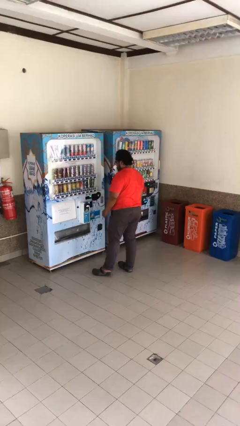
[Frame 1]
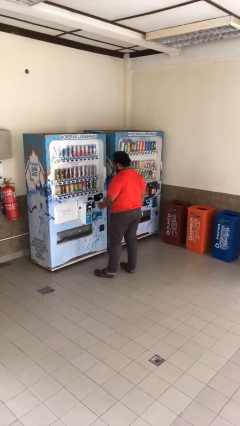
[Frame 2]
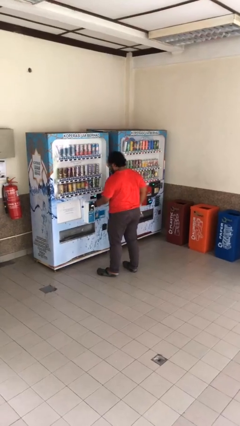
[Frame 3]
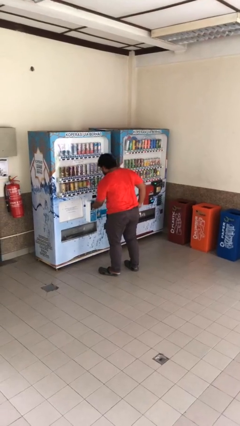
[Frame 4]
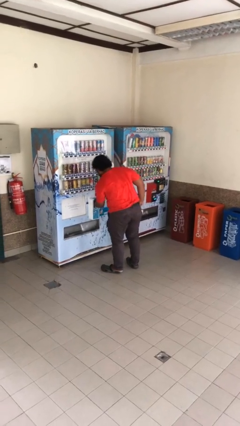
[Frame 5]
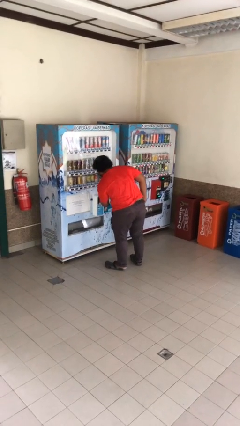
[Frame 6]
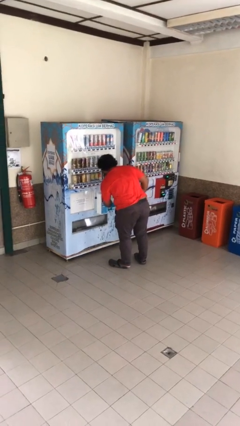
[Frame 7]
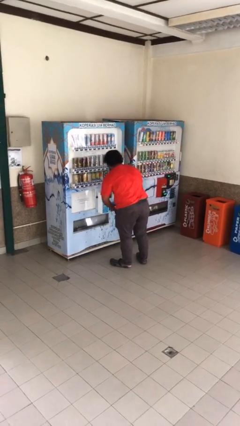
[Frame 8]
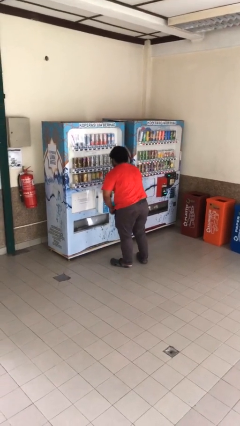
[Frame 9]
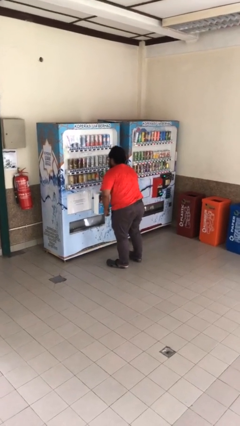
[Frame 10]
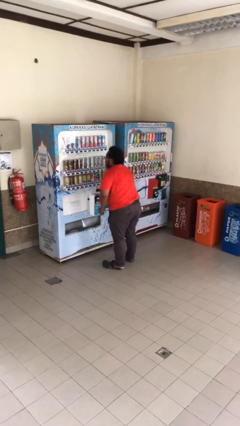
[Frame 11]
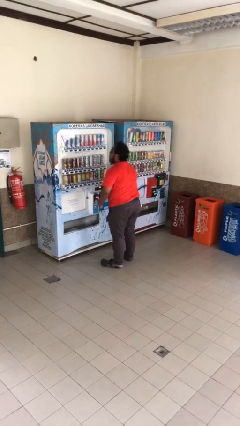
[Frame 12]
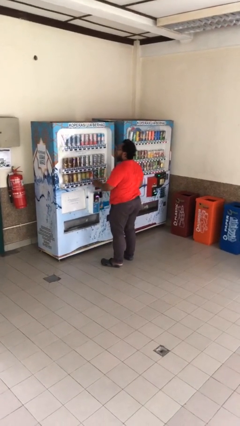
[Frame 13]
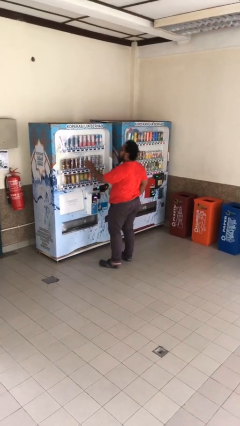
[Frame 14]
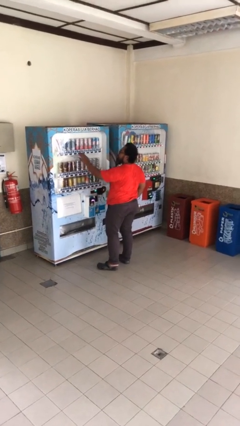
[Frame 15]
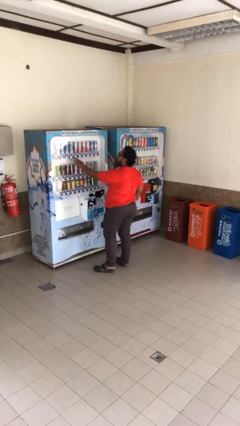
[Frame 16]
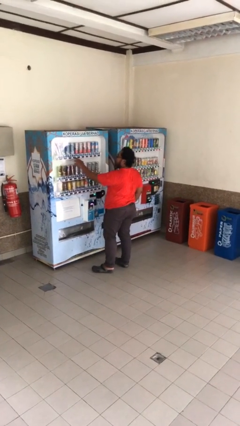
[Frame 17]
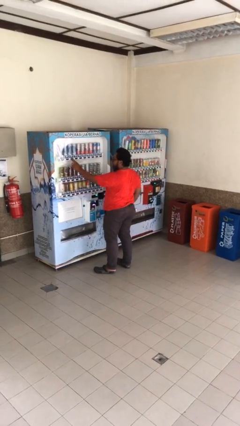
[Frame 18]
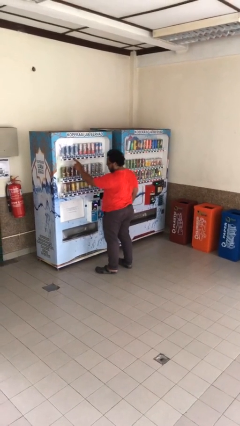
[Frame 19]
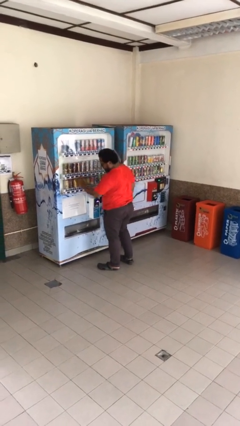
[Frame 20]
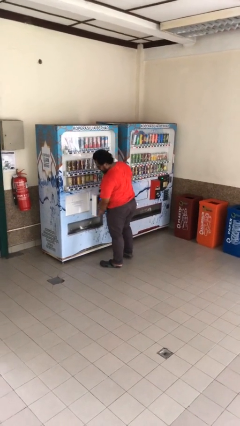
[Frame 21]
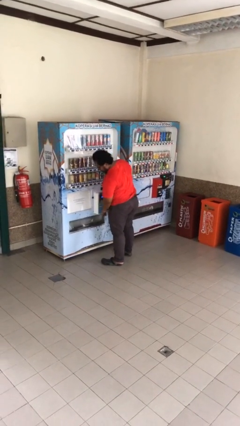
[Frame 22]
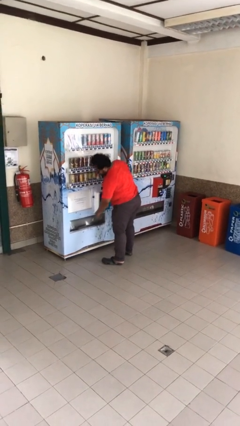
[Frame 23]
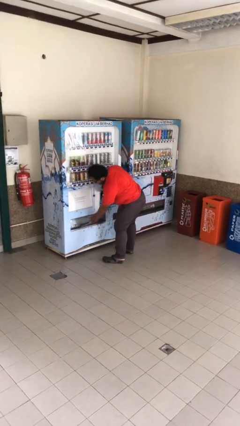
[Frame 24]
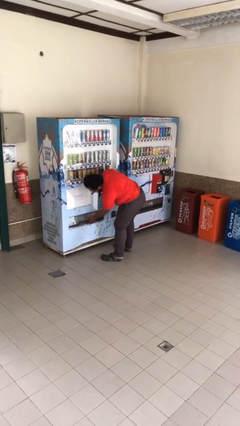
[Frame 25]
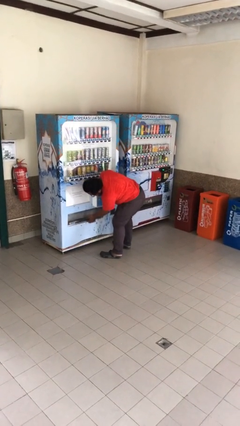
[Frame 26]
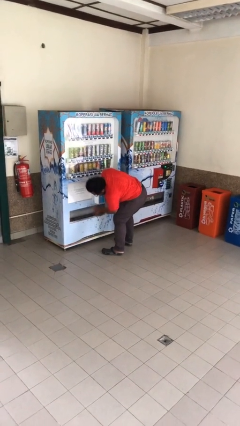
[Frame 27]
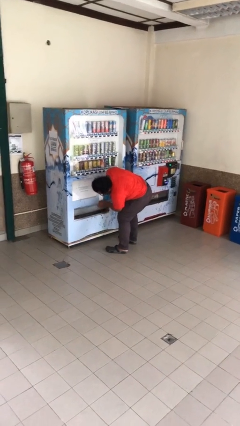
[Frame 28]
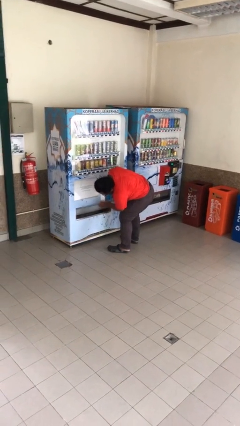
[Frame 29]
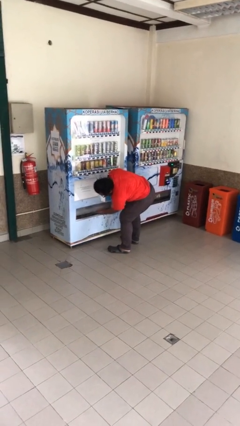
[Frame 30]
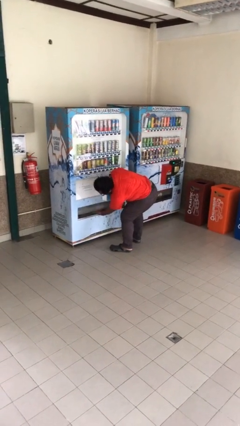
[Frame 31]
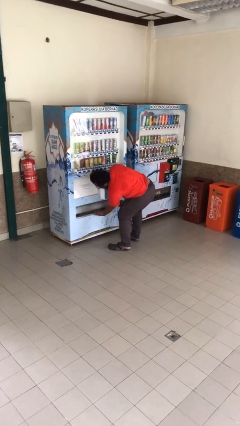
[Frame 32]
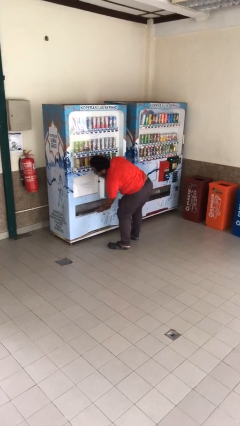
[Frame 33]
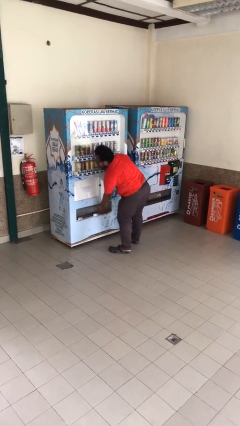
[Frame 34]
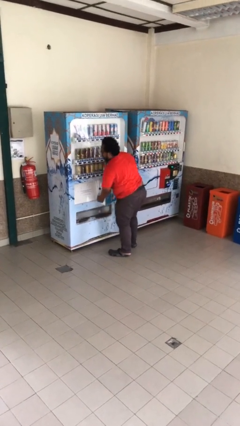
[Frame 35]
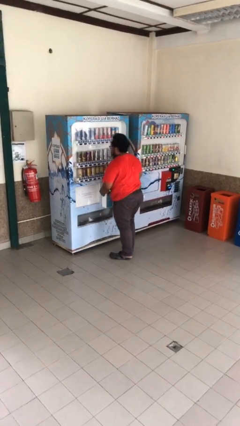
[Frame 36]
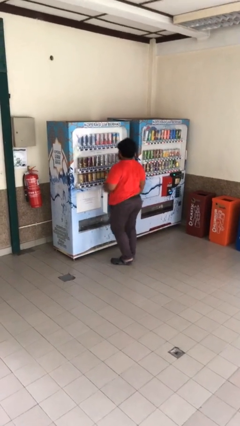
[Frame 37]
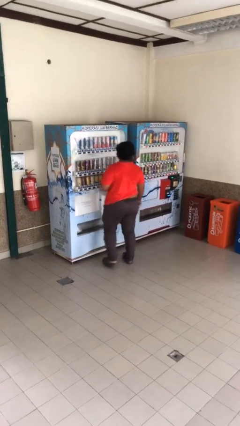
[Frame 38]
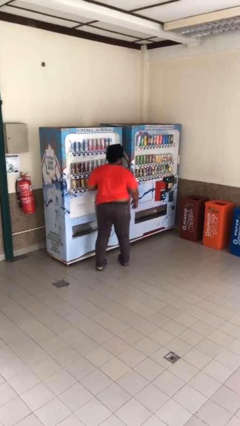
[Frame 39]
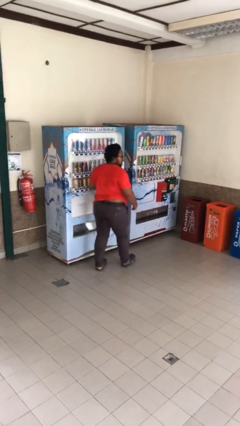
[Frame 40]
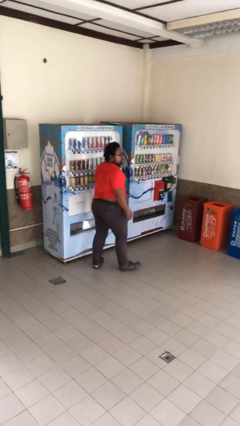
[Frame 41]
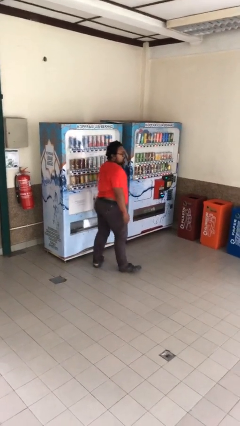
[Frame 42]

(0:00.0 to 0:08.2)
person purchases from machine

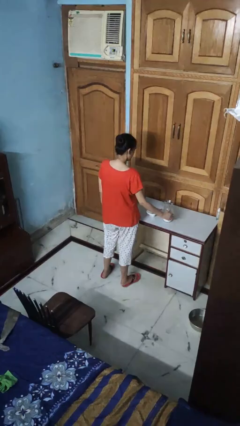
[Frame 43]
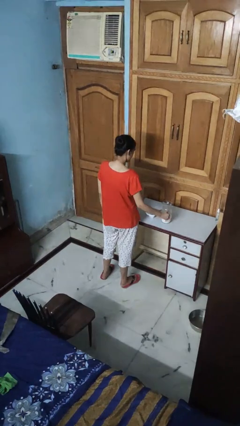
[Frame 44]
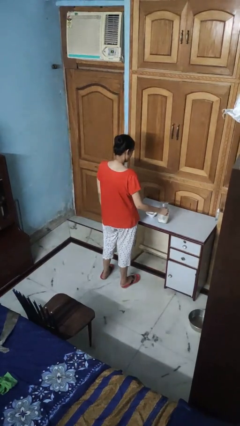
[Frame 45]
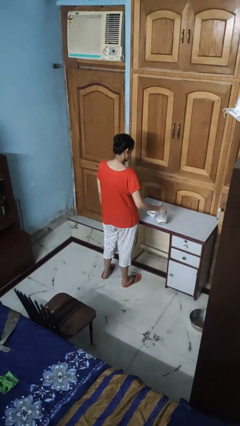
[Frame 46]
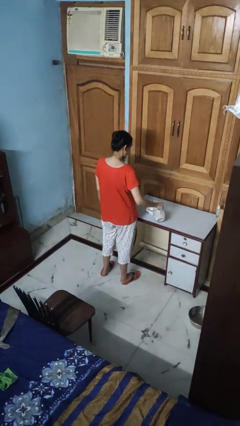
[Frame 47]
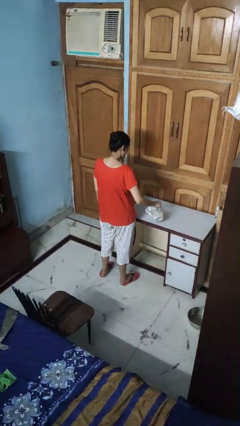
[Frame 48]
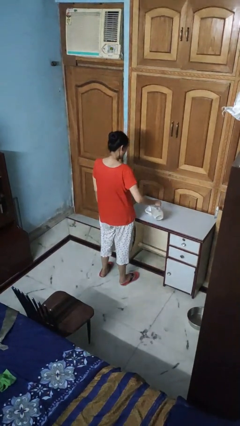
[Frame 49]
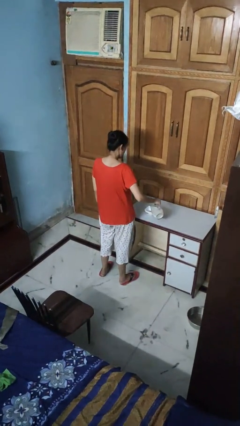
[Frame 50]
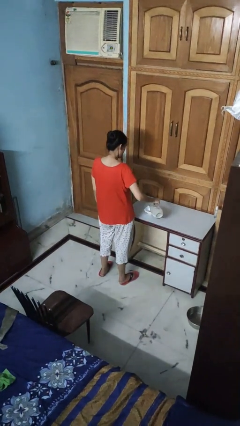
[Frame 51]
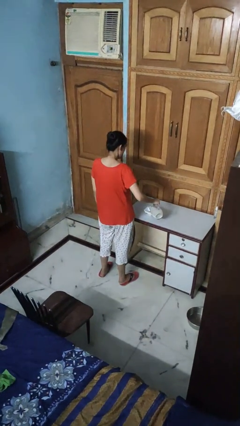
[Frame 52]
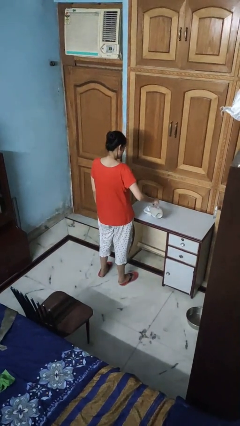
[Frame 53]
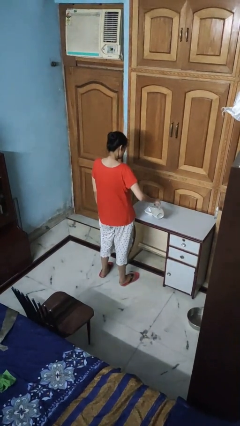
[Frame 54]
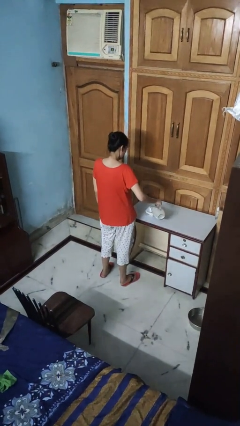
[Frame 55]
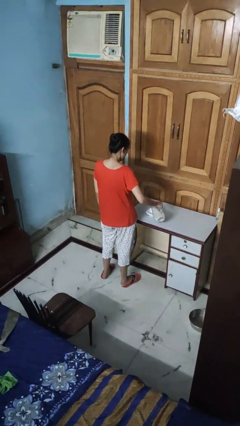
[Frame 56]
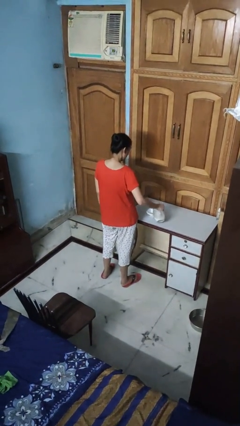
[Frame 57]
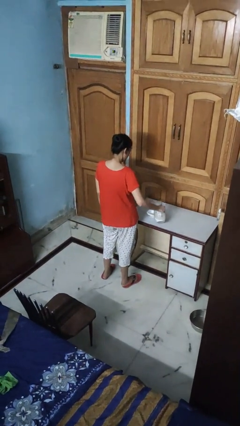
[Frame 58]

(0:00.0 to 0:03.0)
person pours into bowl

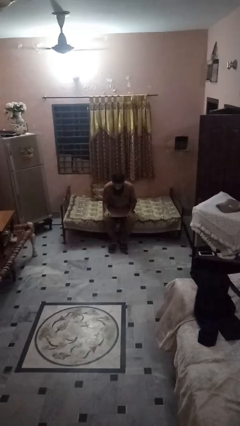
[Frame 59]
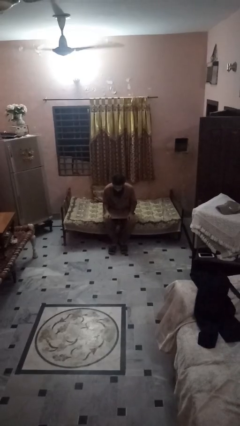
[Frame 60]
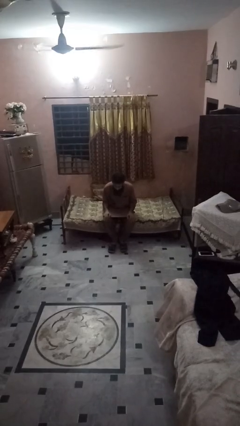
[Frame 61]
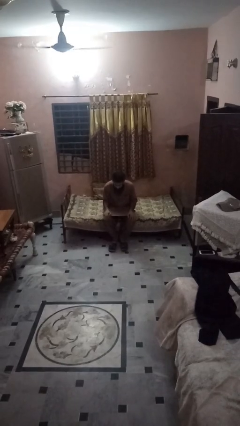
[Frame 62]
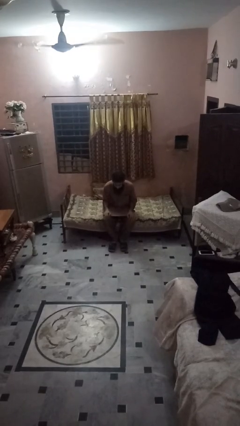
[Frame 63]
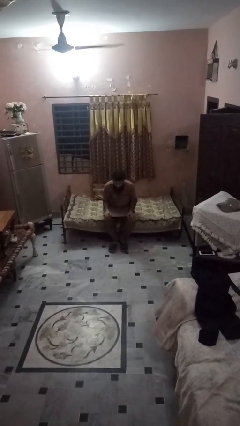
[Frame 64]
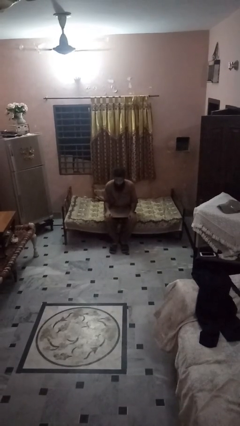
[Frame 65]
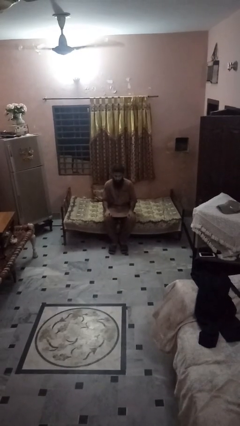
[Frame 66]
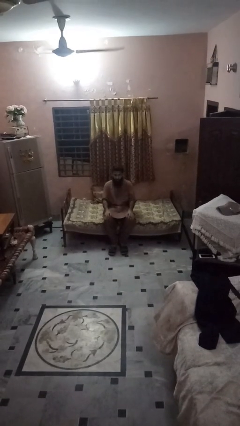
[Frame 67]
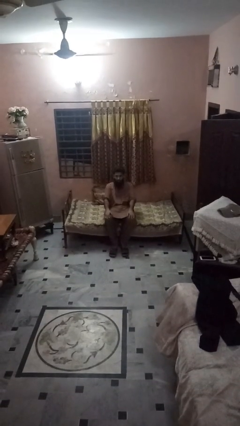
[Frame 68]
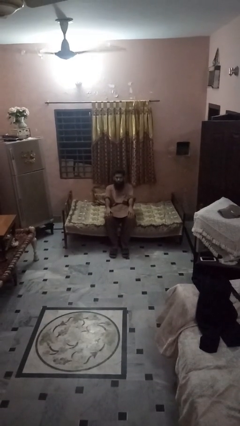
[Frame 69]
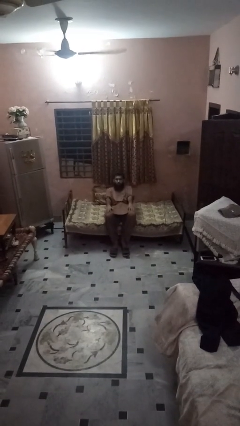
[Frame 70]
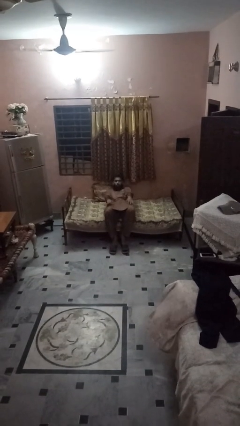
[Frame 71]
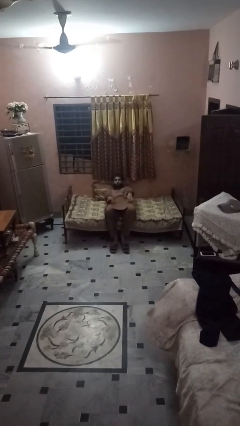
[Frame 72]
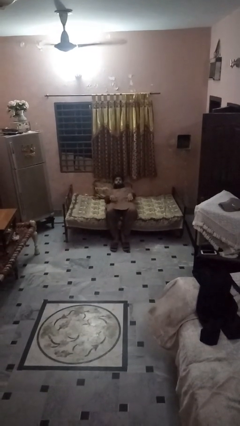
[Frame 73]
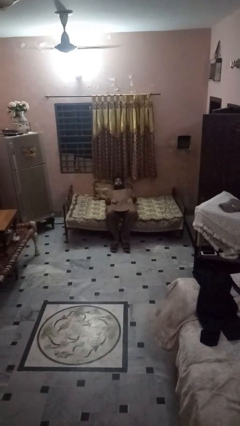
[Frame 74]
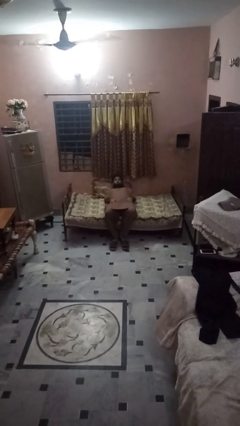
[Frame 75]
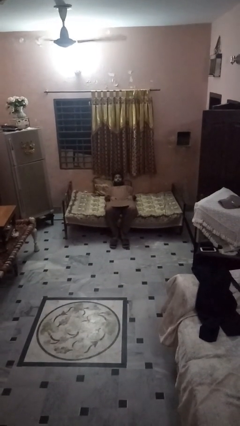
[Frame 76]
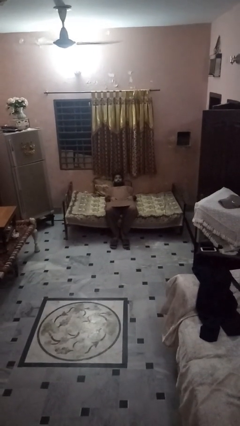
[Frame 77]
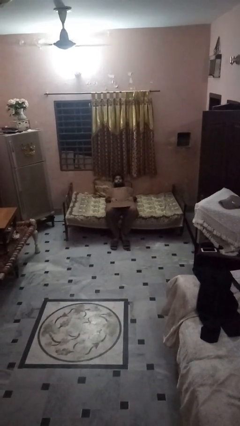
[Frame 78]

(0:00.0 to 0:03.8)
person lies down on bed

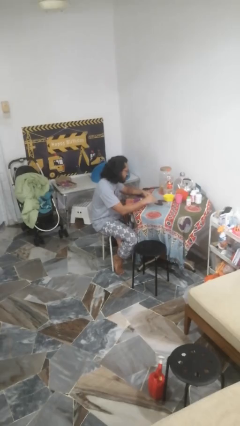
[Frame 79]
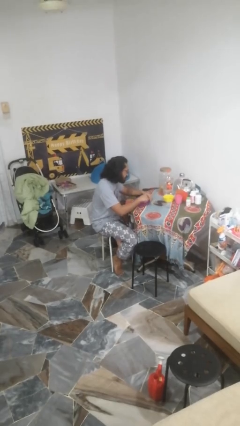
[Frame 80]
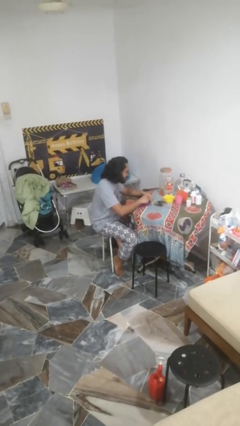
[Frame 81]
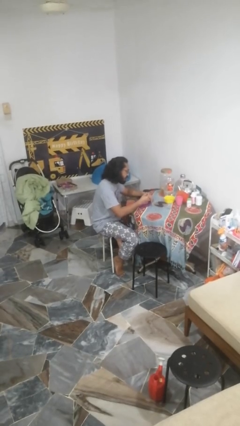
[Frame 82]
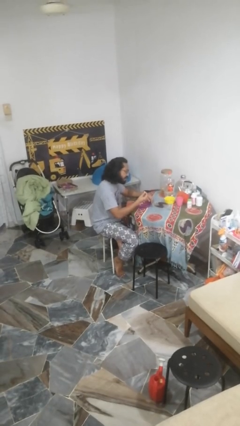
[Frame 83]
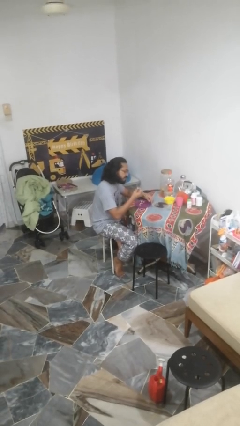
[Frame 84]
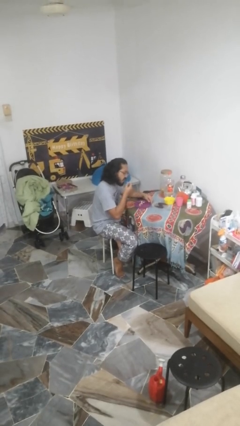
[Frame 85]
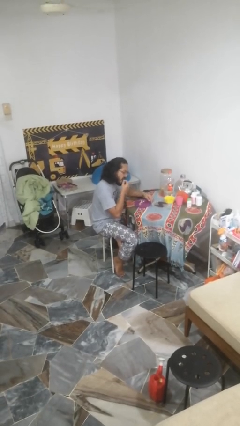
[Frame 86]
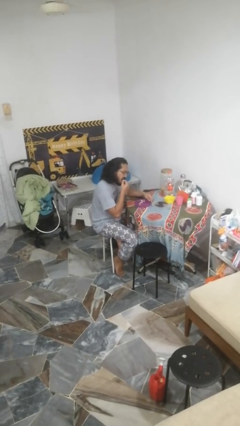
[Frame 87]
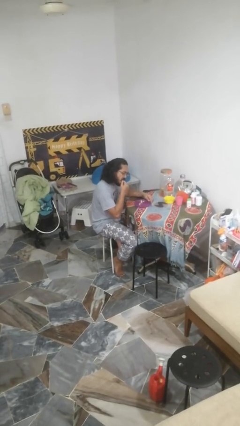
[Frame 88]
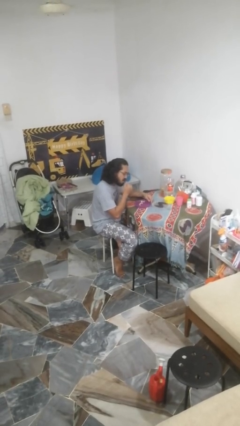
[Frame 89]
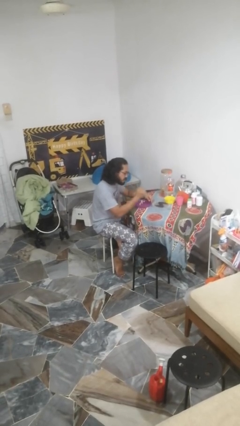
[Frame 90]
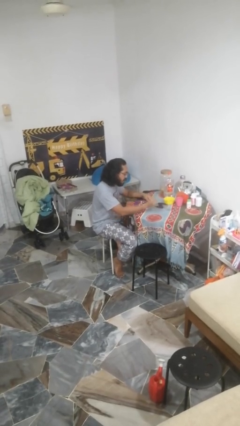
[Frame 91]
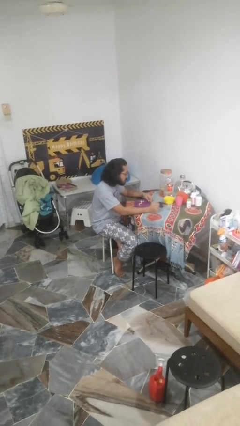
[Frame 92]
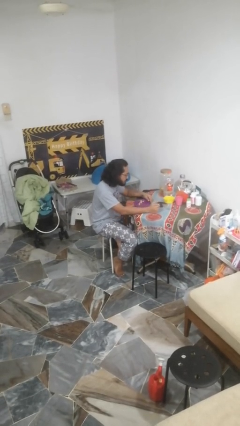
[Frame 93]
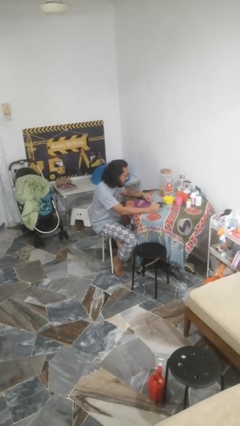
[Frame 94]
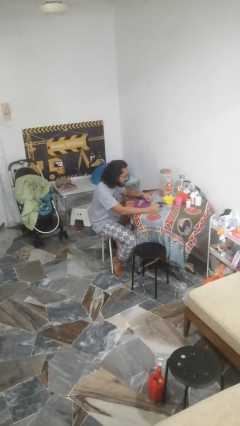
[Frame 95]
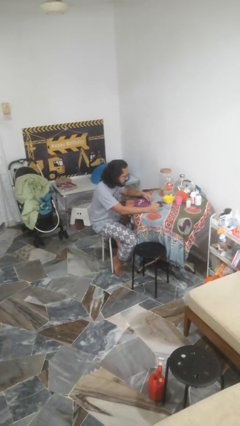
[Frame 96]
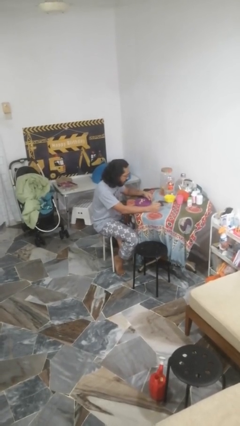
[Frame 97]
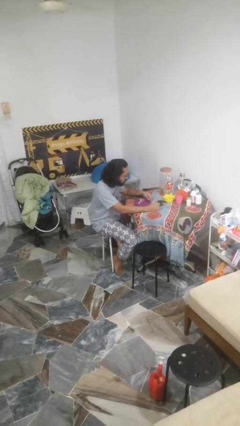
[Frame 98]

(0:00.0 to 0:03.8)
person eats with hands
